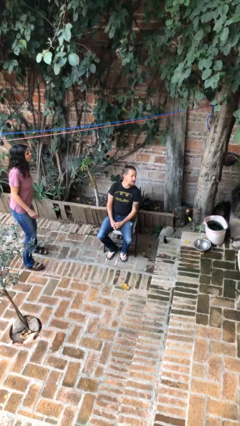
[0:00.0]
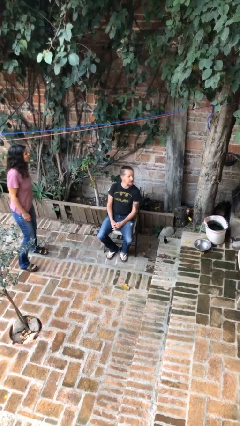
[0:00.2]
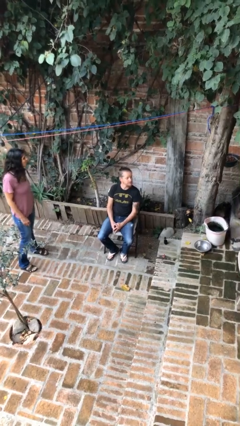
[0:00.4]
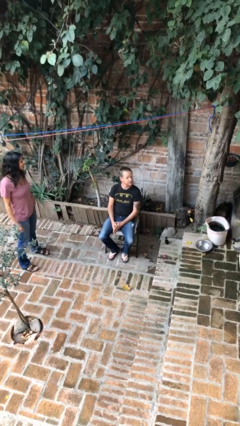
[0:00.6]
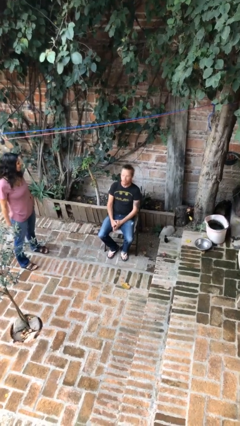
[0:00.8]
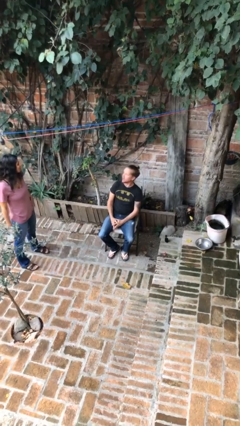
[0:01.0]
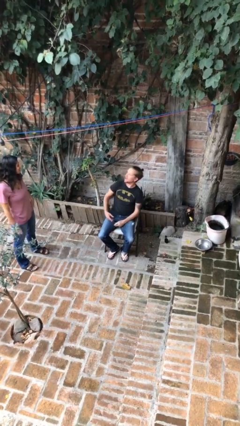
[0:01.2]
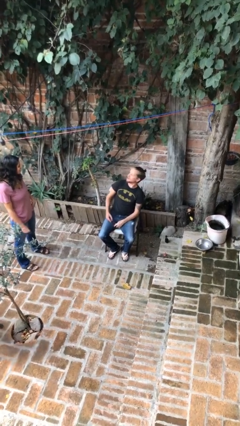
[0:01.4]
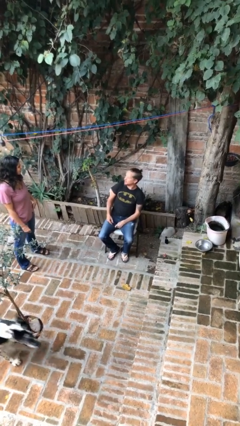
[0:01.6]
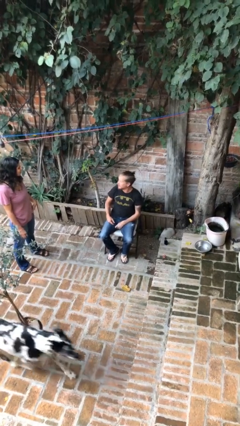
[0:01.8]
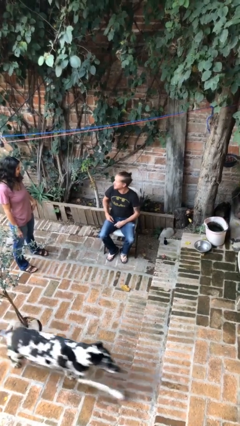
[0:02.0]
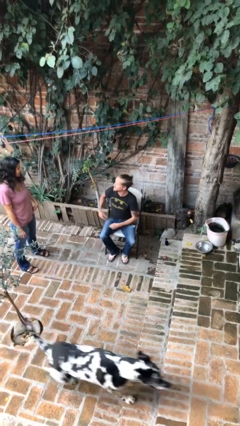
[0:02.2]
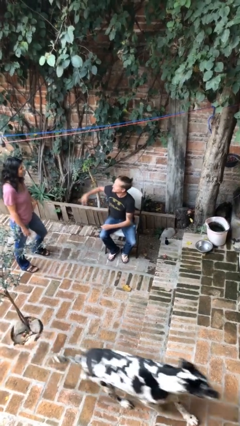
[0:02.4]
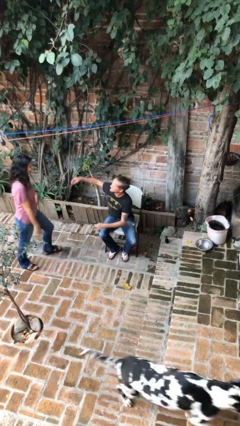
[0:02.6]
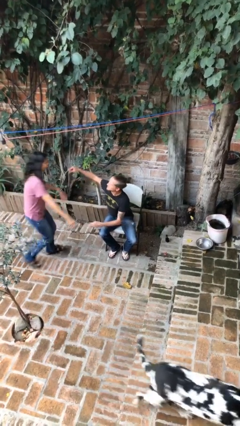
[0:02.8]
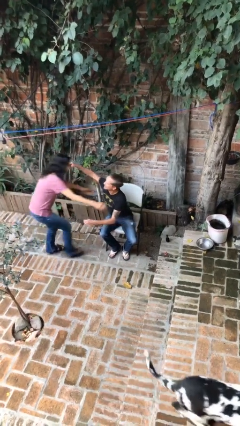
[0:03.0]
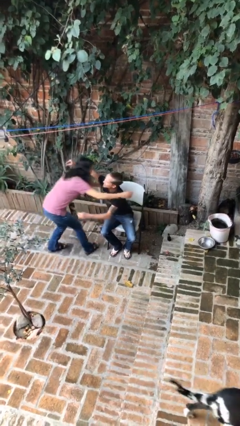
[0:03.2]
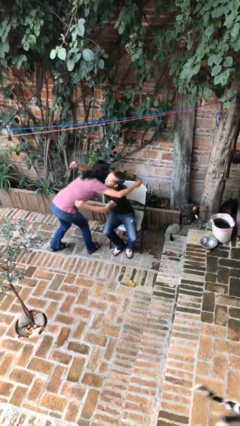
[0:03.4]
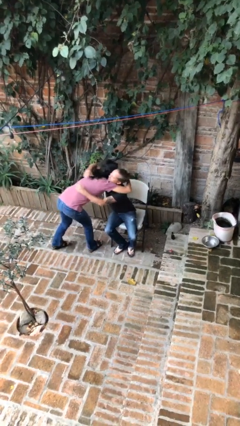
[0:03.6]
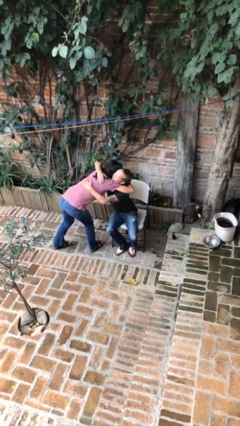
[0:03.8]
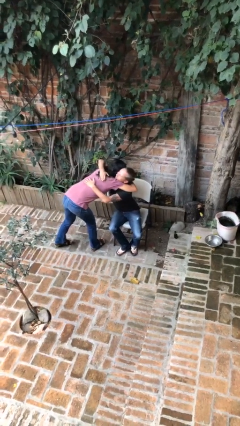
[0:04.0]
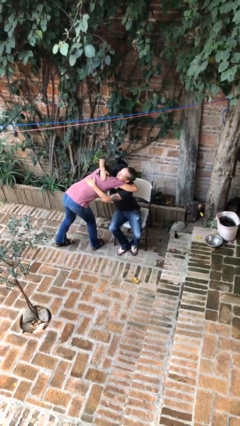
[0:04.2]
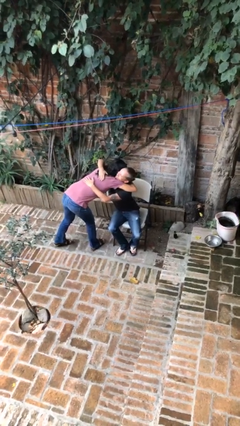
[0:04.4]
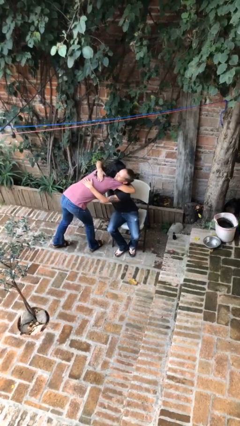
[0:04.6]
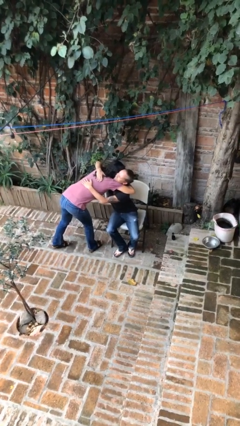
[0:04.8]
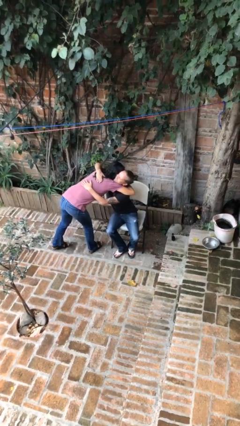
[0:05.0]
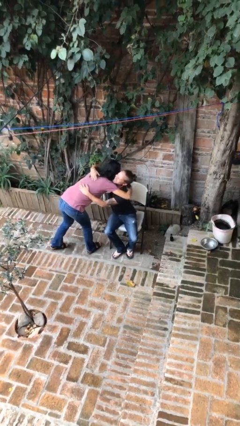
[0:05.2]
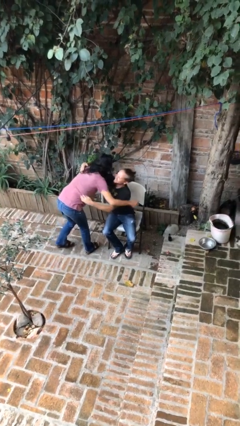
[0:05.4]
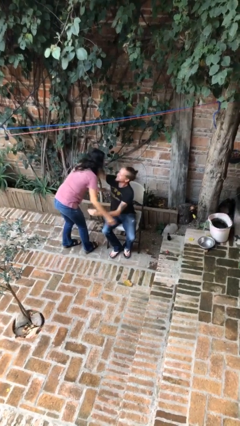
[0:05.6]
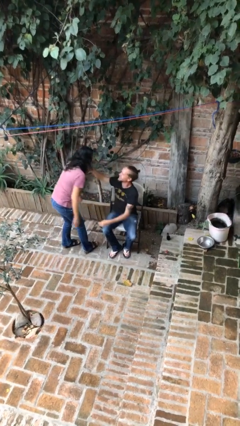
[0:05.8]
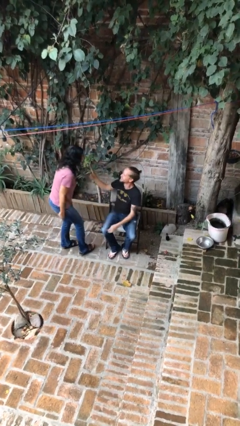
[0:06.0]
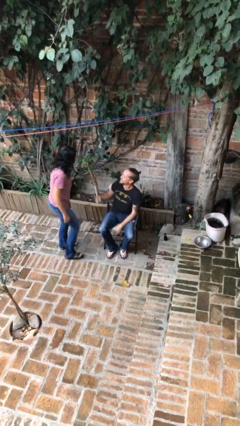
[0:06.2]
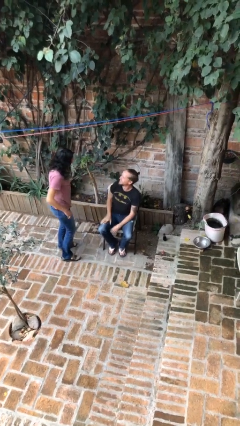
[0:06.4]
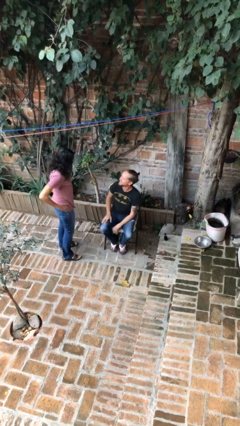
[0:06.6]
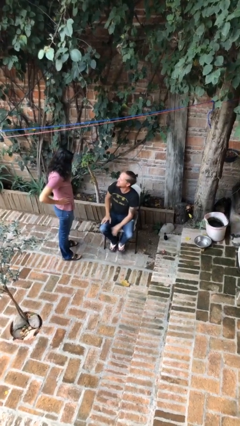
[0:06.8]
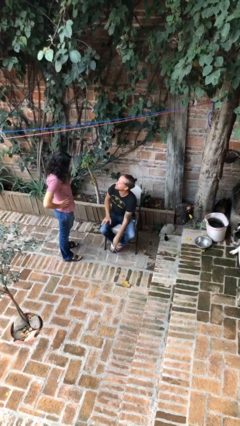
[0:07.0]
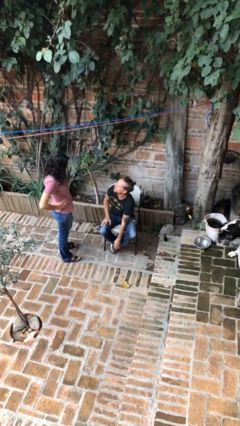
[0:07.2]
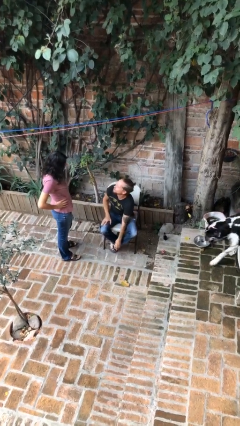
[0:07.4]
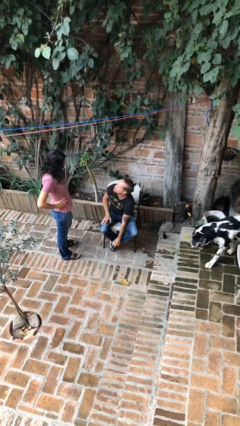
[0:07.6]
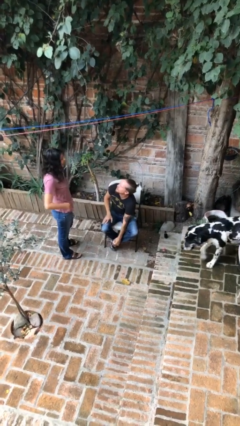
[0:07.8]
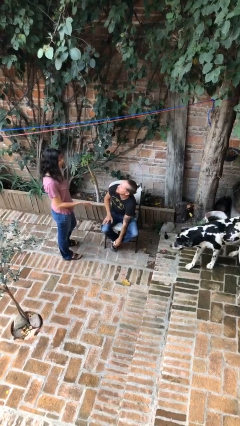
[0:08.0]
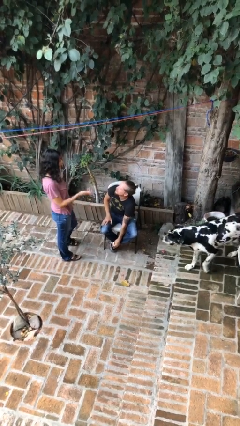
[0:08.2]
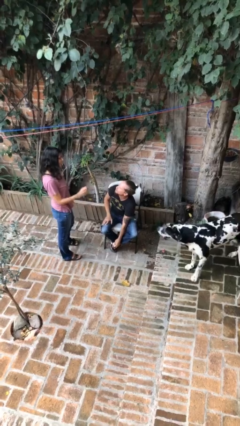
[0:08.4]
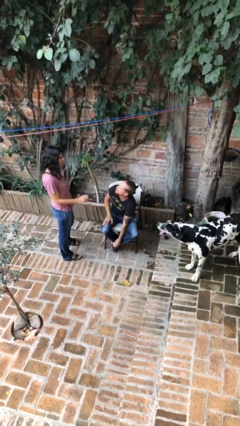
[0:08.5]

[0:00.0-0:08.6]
person embraces person

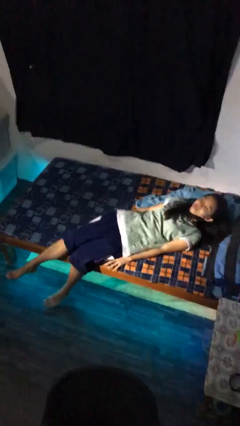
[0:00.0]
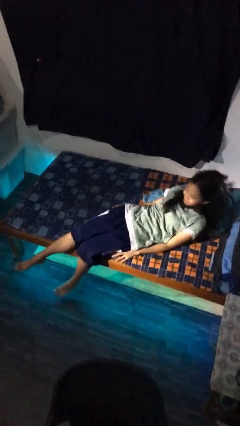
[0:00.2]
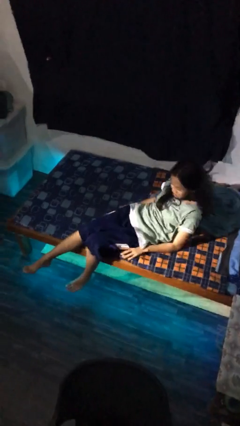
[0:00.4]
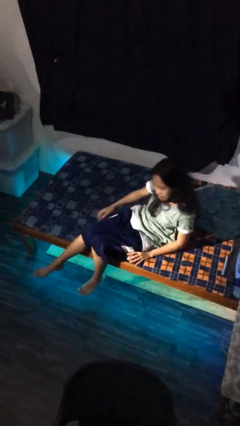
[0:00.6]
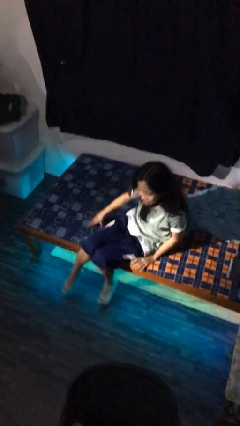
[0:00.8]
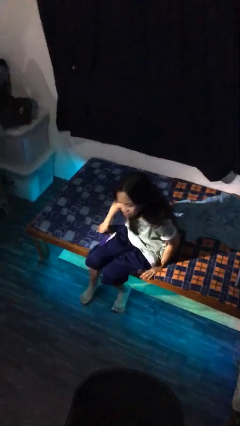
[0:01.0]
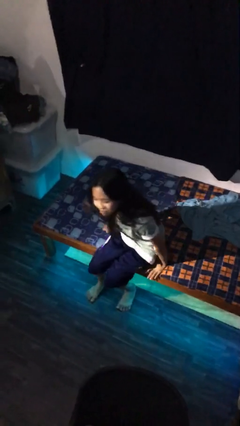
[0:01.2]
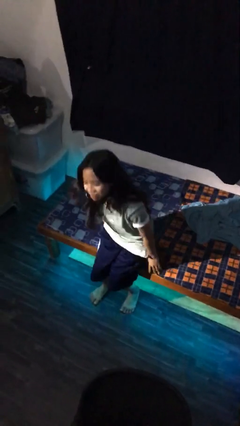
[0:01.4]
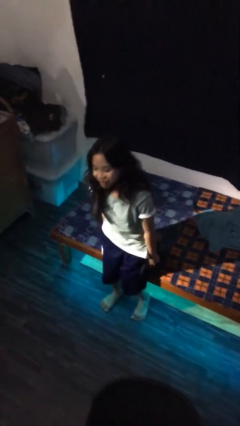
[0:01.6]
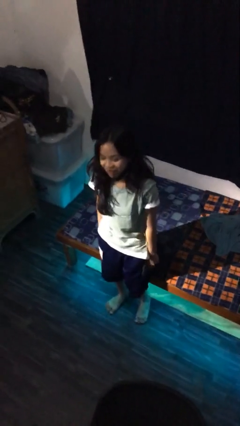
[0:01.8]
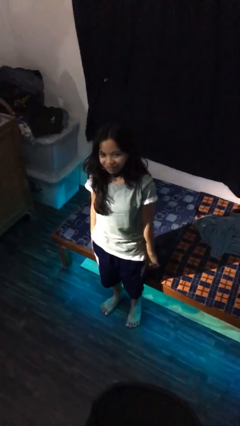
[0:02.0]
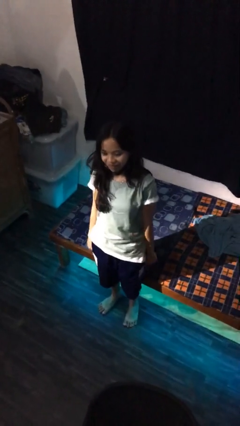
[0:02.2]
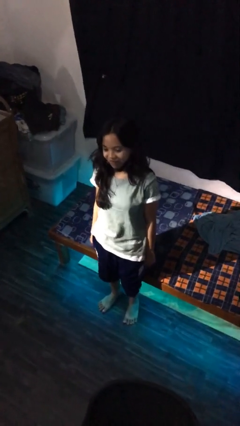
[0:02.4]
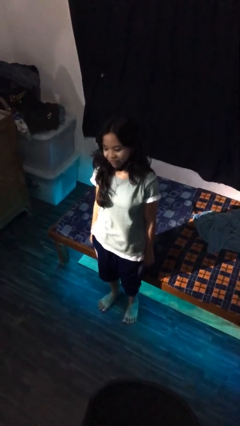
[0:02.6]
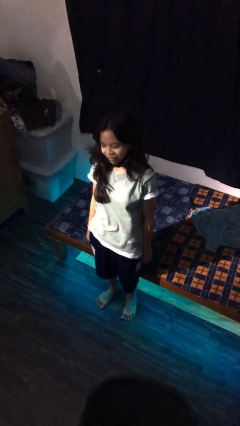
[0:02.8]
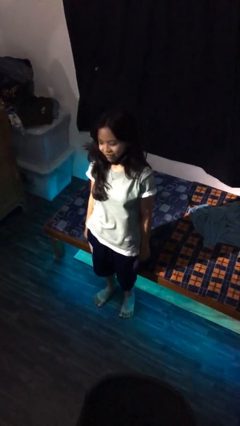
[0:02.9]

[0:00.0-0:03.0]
person stands up

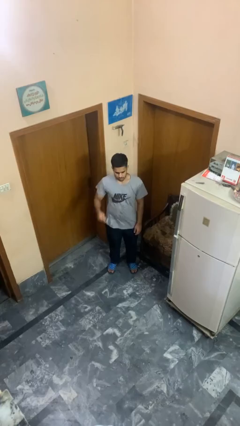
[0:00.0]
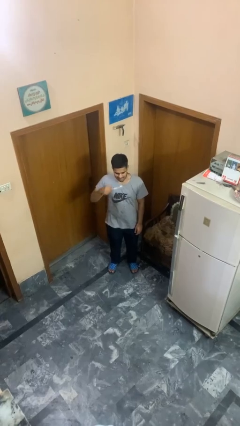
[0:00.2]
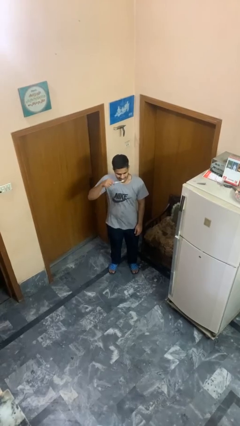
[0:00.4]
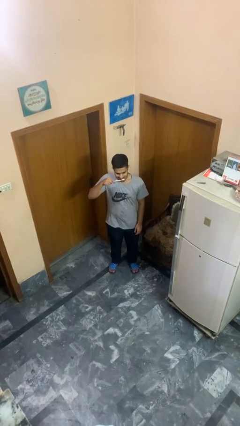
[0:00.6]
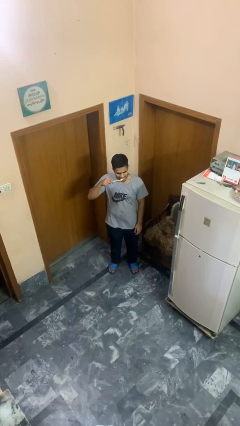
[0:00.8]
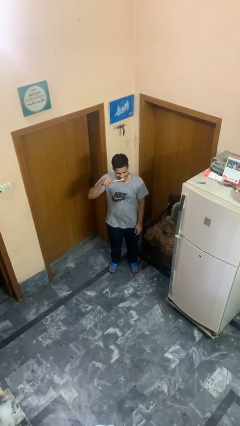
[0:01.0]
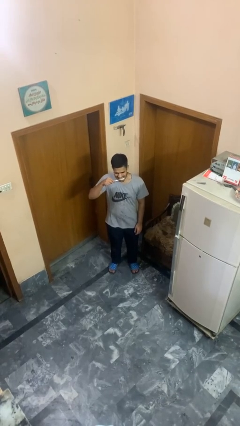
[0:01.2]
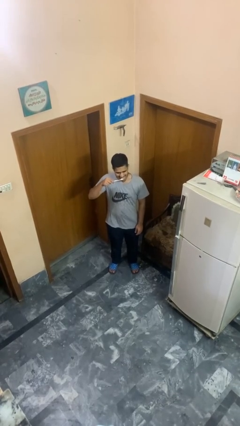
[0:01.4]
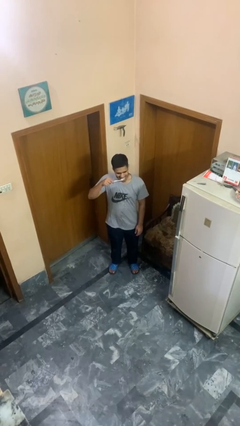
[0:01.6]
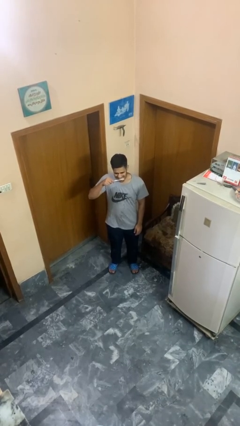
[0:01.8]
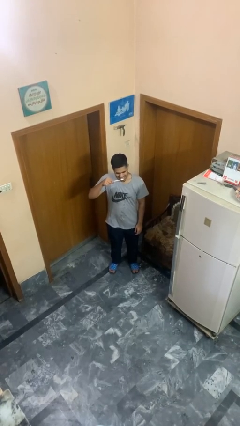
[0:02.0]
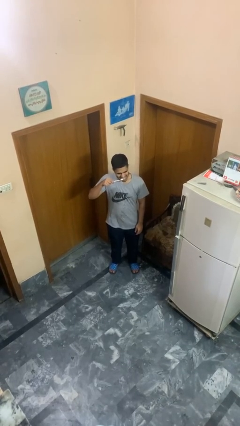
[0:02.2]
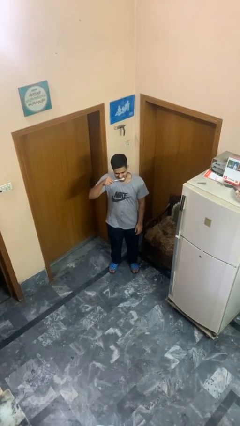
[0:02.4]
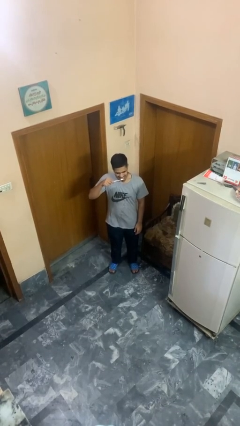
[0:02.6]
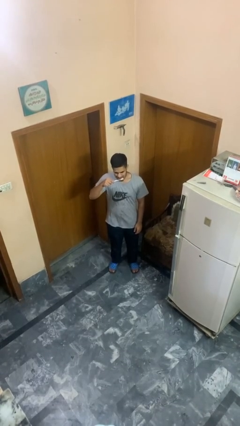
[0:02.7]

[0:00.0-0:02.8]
person brushes teeth

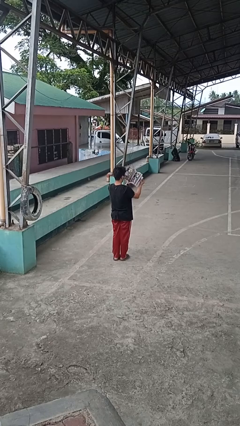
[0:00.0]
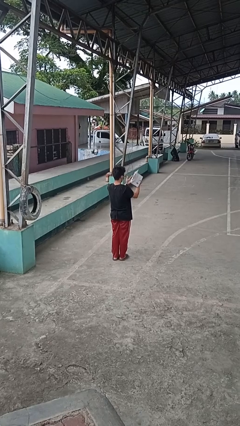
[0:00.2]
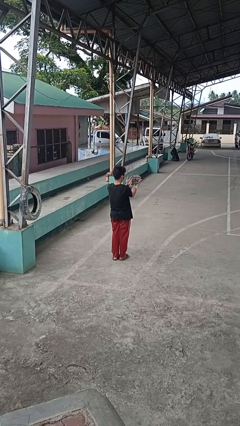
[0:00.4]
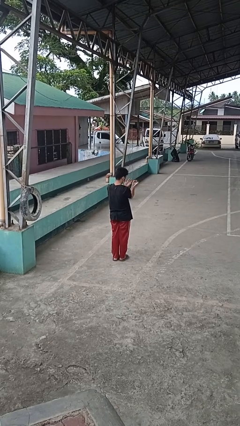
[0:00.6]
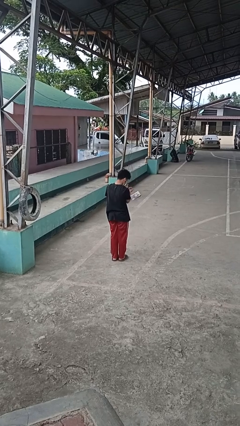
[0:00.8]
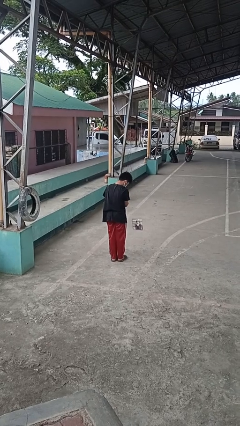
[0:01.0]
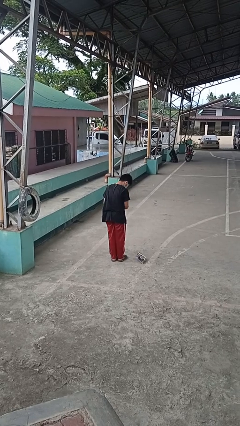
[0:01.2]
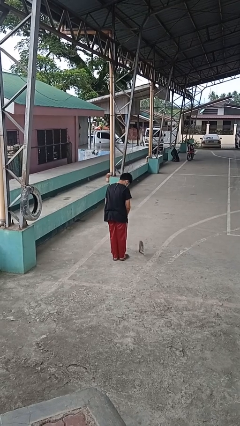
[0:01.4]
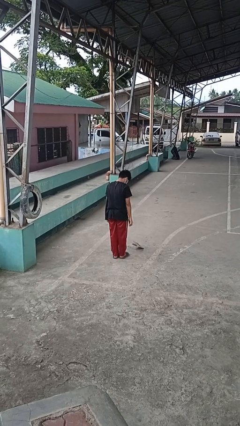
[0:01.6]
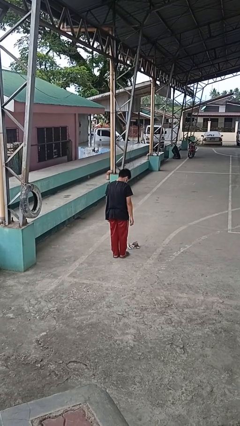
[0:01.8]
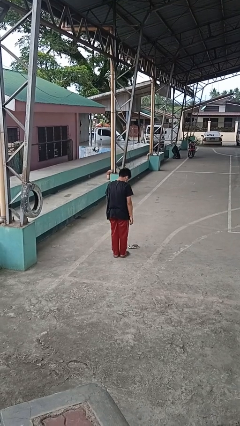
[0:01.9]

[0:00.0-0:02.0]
person drops object

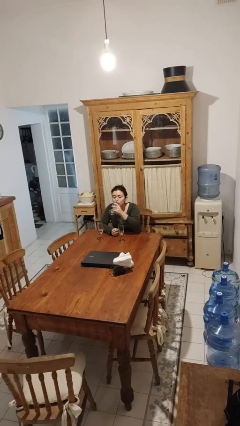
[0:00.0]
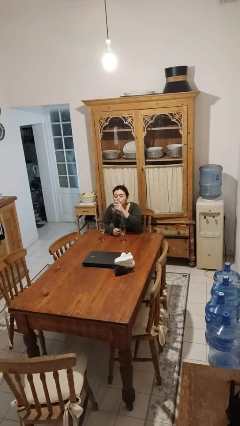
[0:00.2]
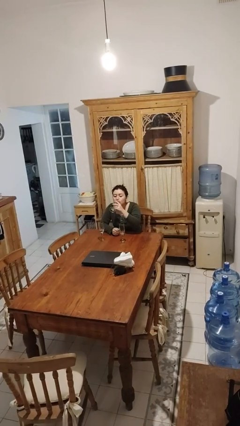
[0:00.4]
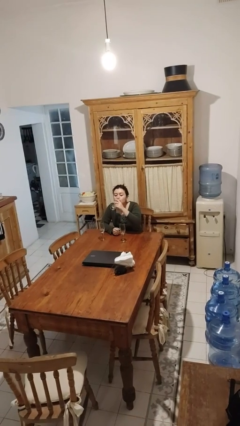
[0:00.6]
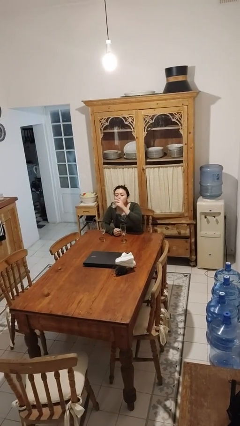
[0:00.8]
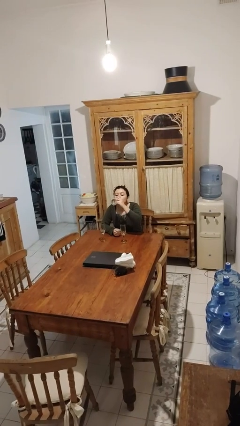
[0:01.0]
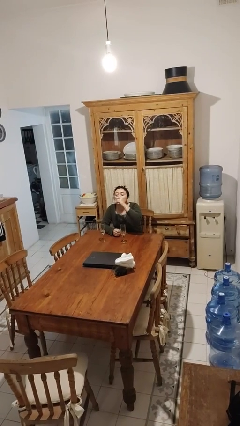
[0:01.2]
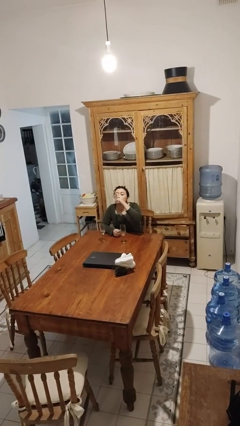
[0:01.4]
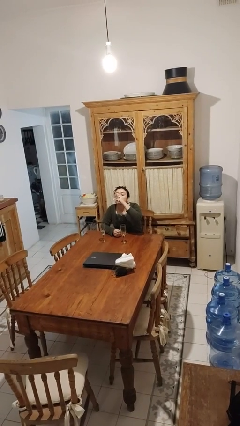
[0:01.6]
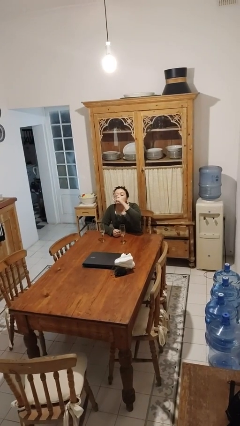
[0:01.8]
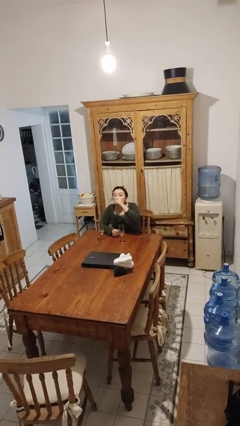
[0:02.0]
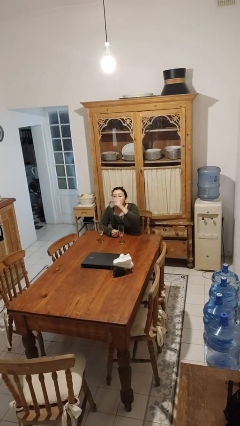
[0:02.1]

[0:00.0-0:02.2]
person drinks from shotglass
